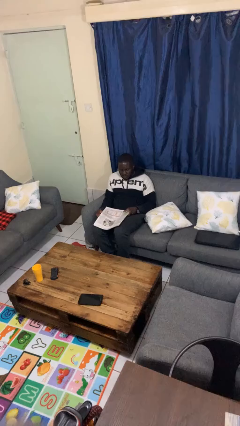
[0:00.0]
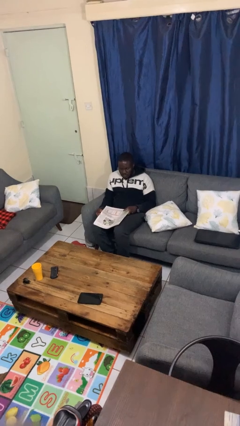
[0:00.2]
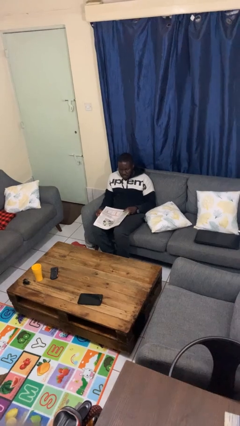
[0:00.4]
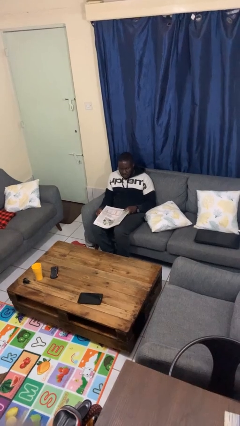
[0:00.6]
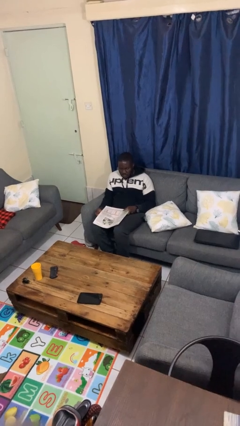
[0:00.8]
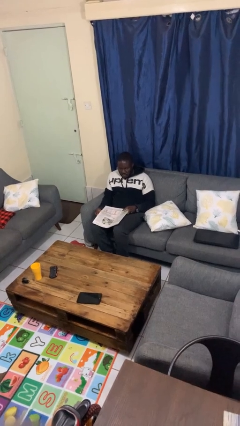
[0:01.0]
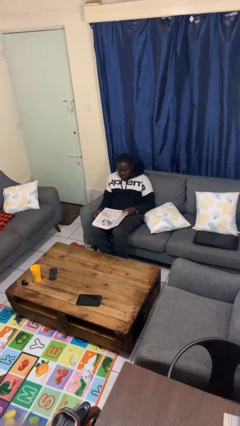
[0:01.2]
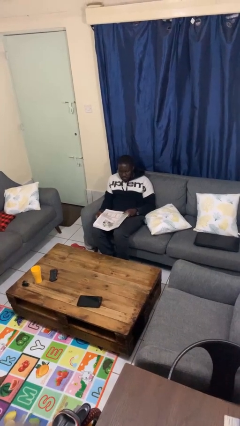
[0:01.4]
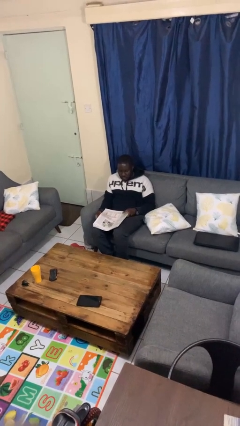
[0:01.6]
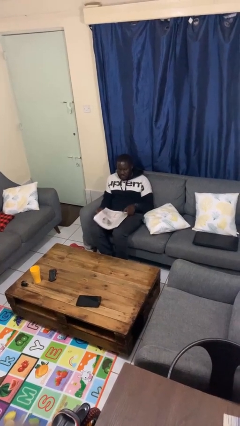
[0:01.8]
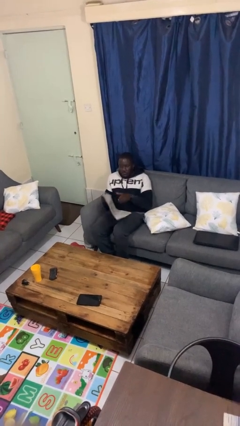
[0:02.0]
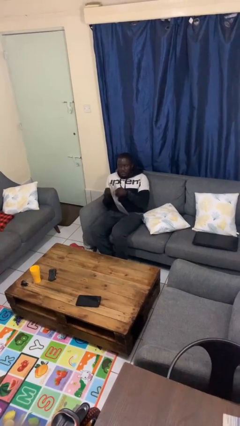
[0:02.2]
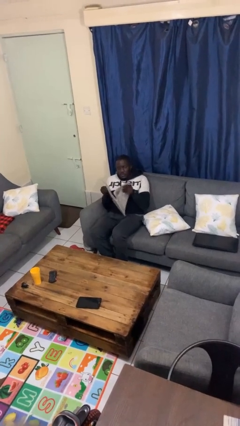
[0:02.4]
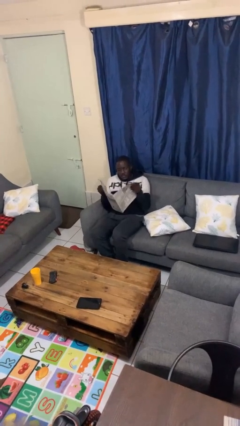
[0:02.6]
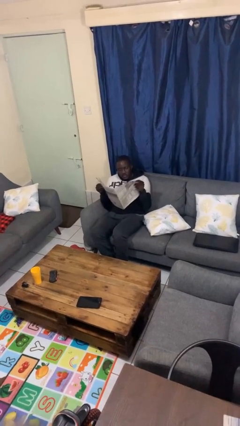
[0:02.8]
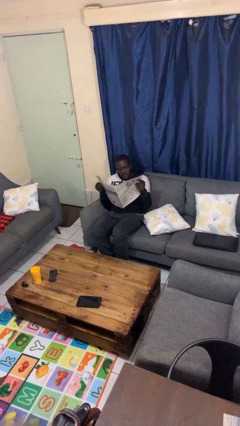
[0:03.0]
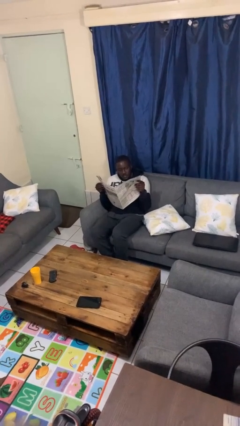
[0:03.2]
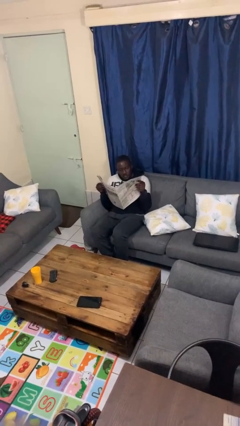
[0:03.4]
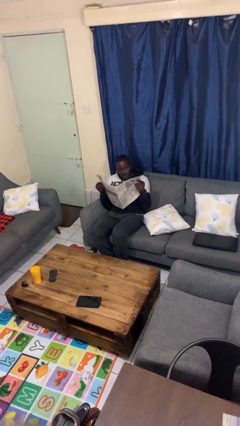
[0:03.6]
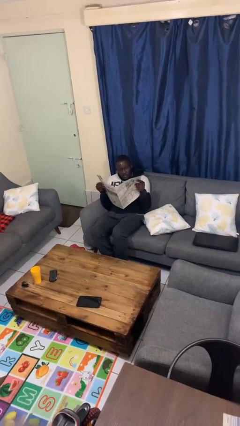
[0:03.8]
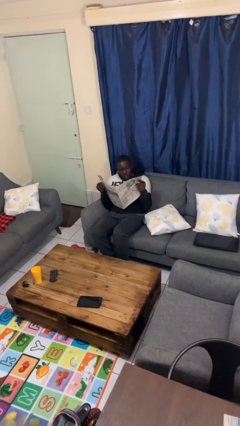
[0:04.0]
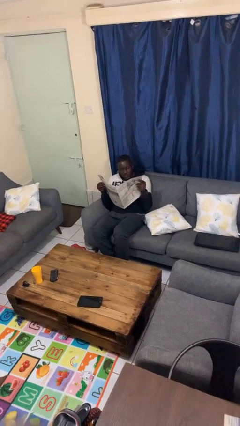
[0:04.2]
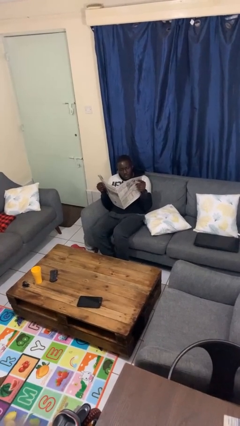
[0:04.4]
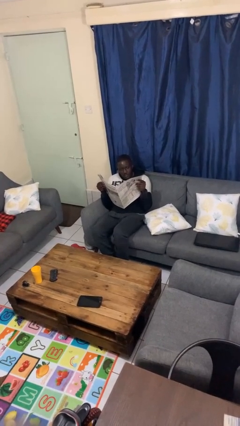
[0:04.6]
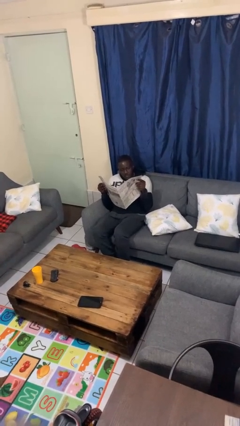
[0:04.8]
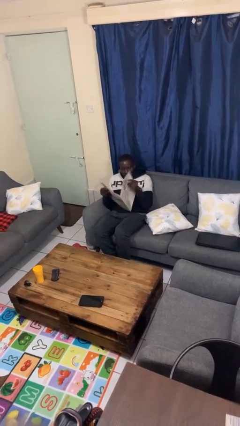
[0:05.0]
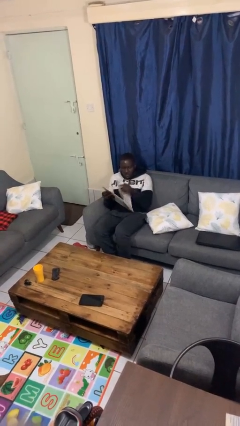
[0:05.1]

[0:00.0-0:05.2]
person reads newspaper

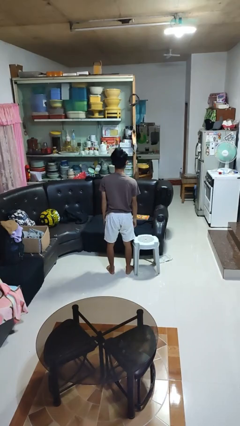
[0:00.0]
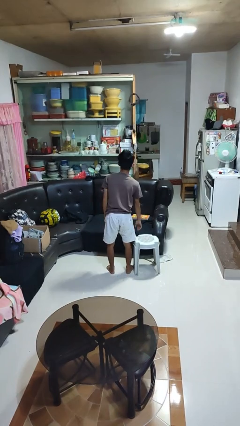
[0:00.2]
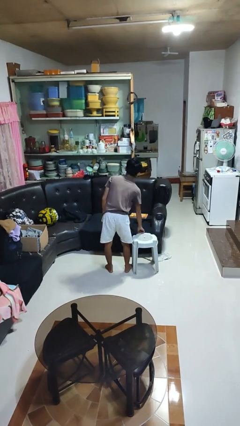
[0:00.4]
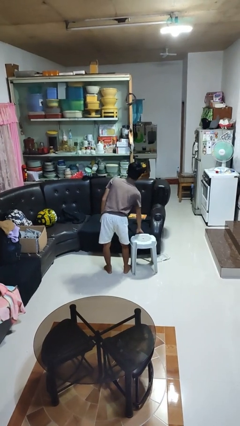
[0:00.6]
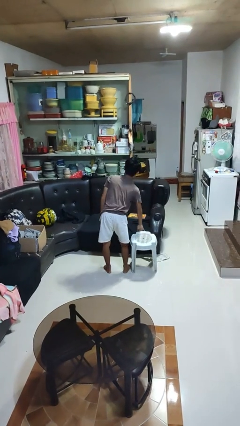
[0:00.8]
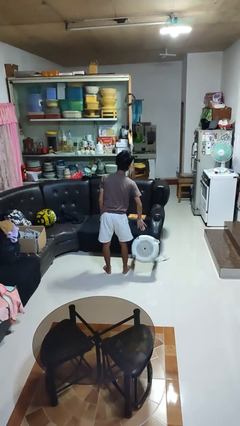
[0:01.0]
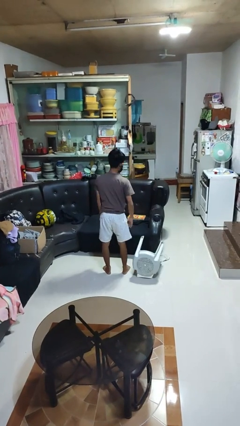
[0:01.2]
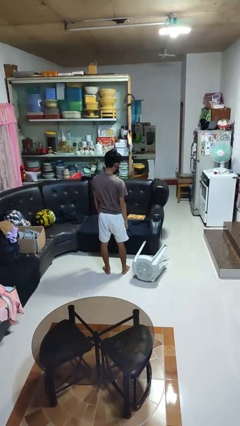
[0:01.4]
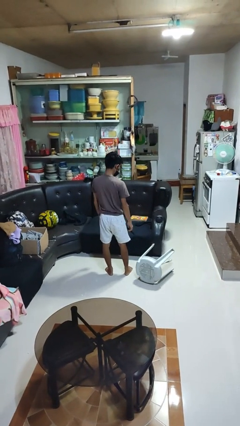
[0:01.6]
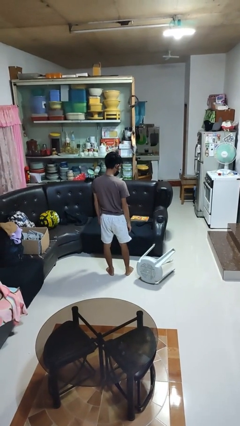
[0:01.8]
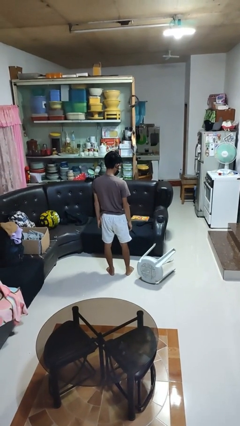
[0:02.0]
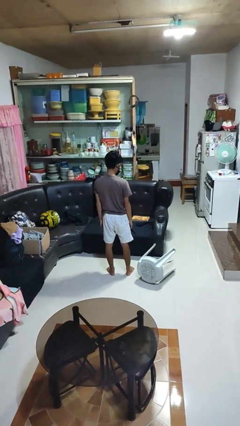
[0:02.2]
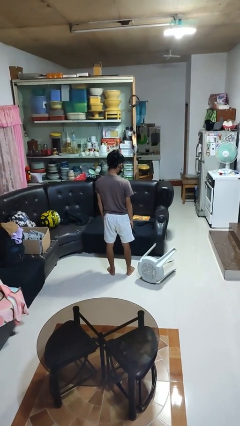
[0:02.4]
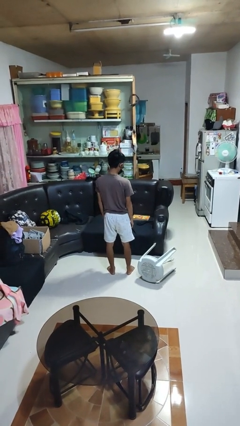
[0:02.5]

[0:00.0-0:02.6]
person knocks over furniture

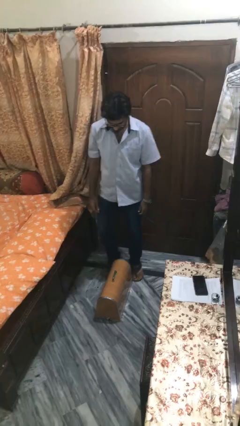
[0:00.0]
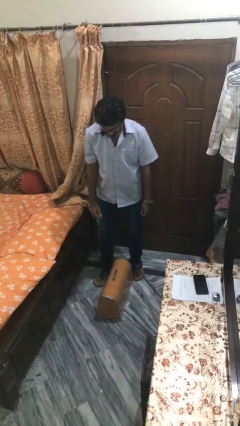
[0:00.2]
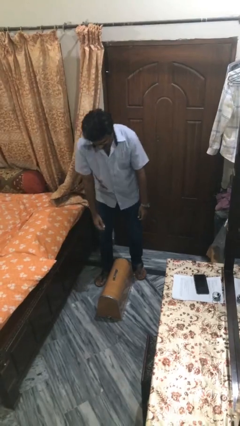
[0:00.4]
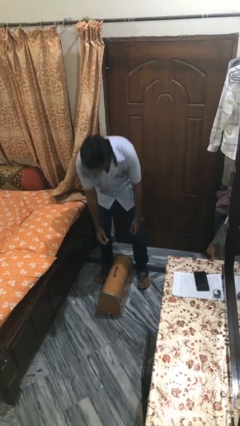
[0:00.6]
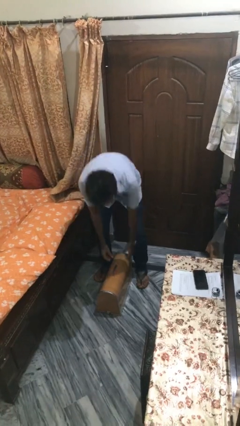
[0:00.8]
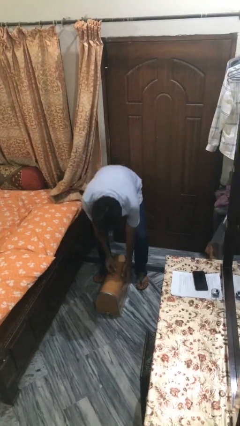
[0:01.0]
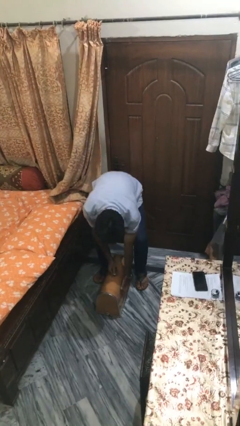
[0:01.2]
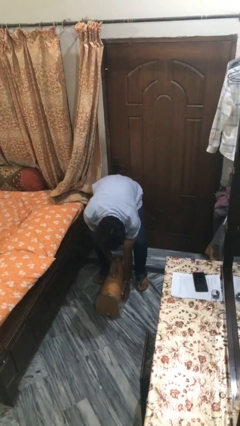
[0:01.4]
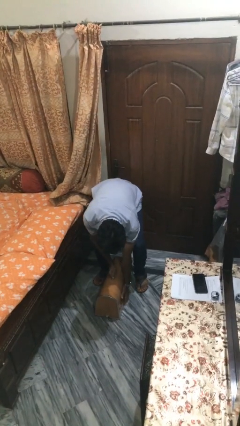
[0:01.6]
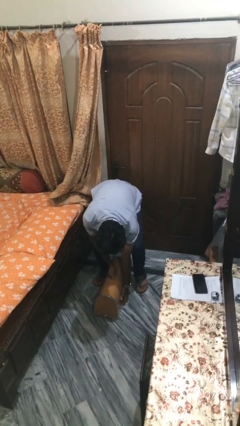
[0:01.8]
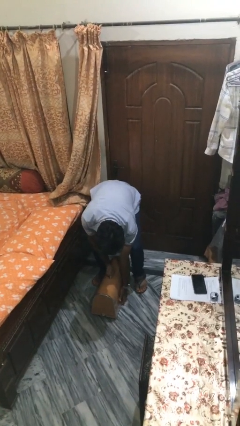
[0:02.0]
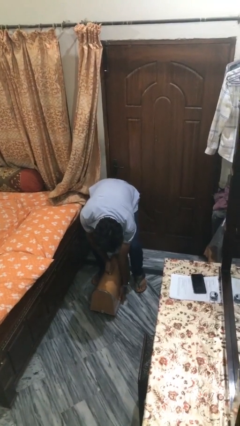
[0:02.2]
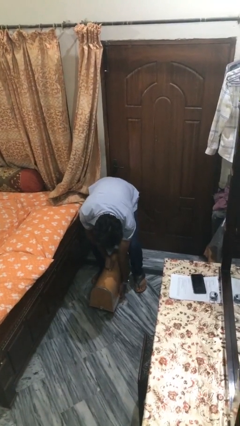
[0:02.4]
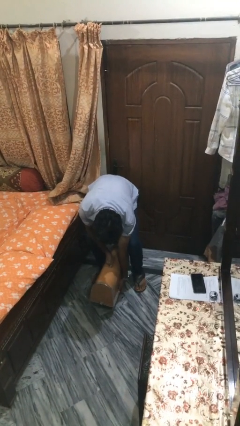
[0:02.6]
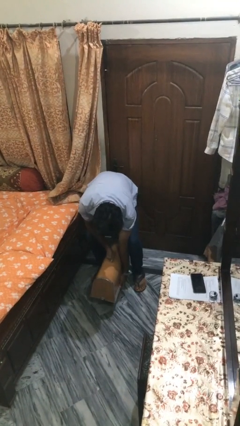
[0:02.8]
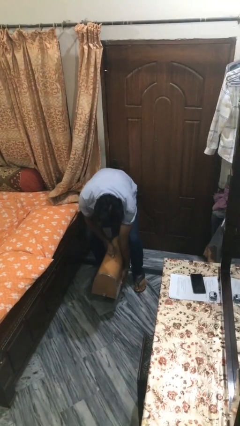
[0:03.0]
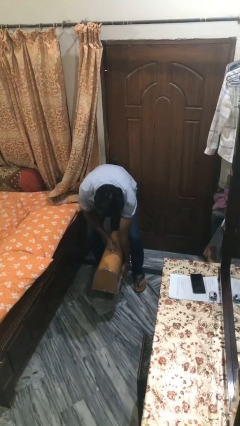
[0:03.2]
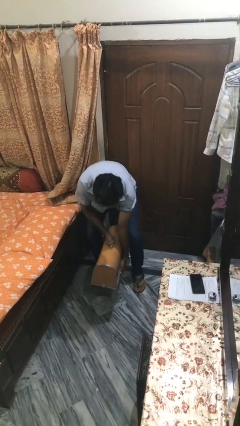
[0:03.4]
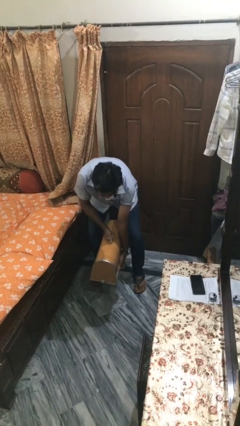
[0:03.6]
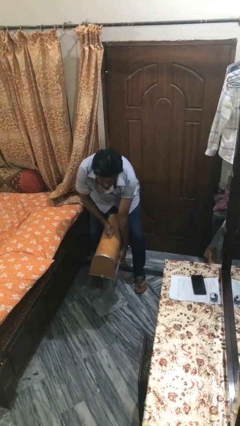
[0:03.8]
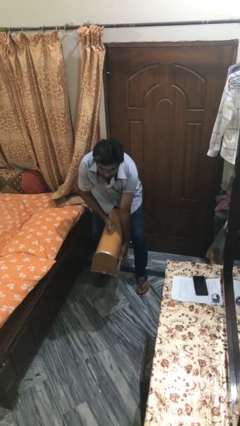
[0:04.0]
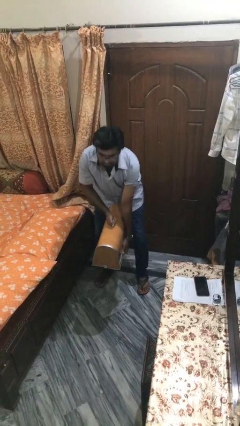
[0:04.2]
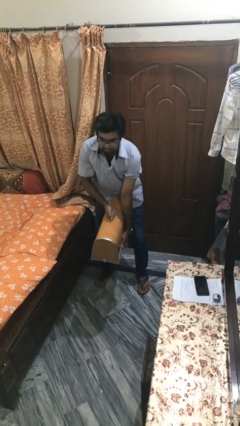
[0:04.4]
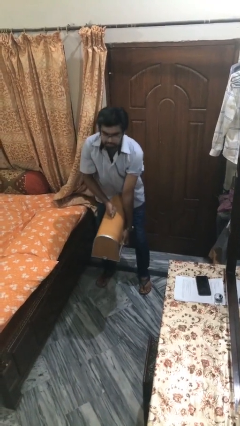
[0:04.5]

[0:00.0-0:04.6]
person picks up object from floor

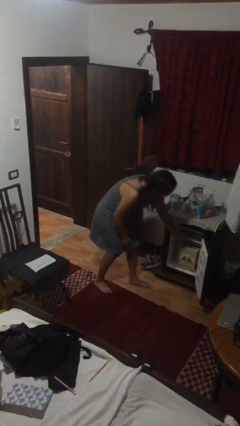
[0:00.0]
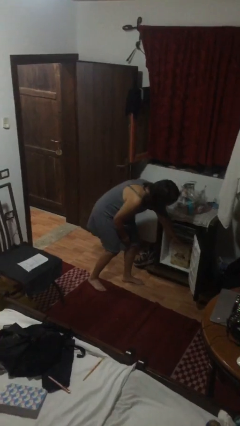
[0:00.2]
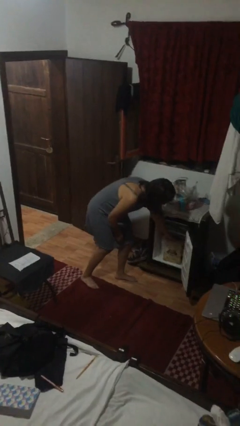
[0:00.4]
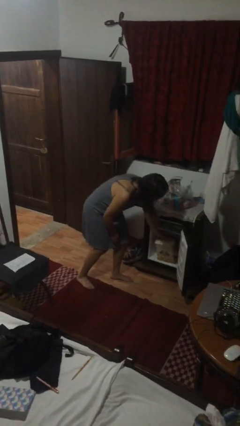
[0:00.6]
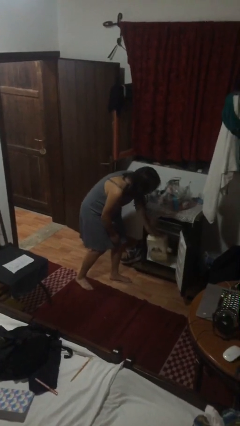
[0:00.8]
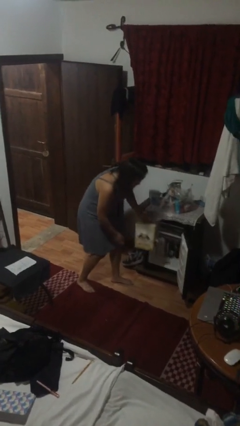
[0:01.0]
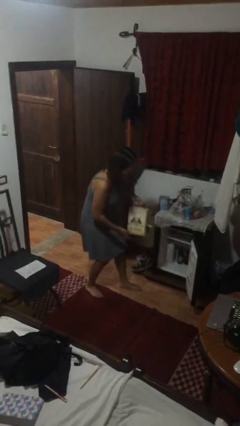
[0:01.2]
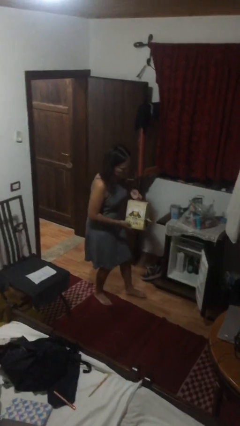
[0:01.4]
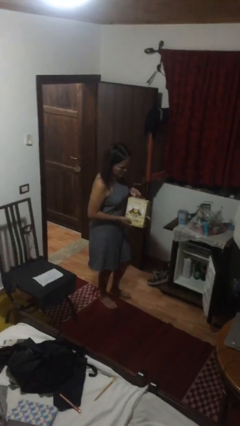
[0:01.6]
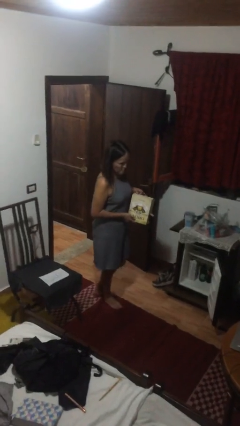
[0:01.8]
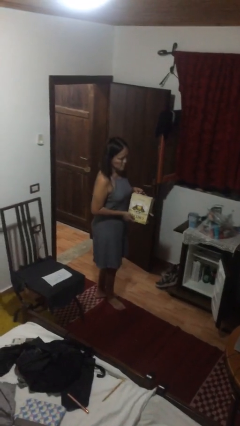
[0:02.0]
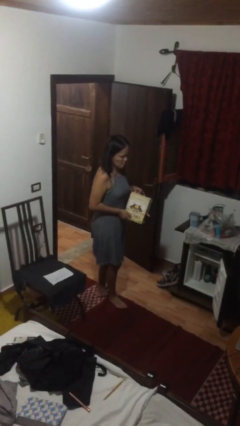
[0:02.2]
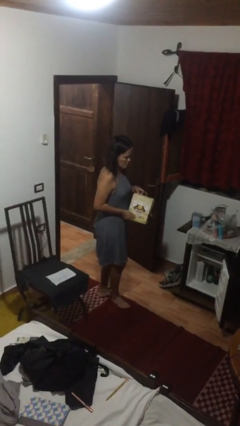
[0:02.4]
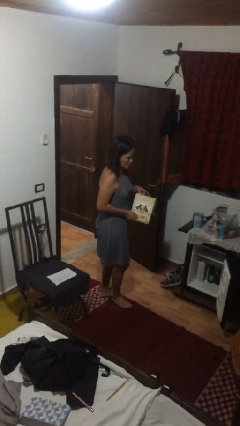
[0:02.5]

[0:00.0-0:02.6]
person picks up object from cabinet

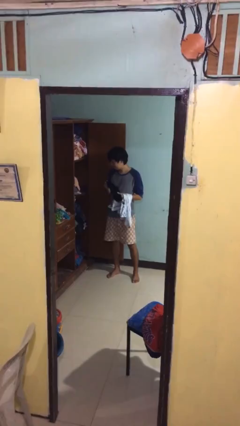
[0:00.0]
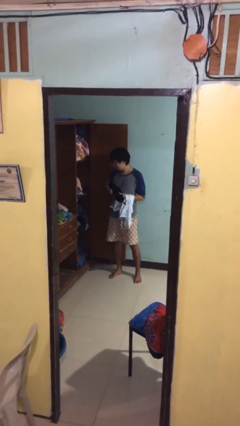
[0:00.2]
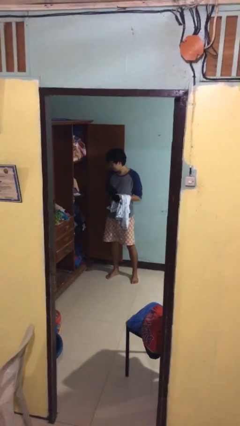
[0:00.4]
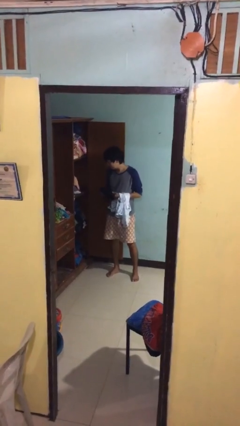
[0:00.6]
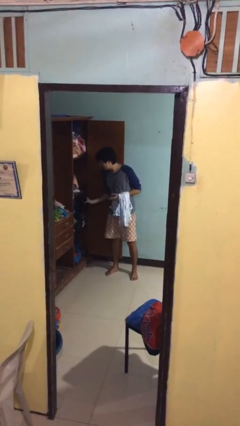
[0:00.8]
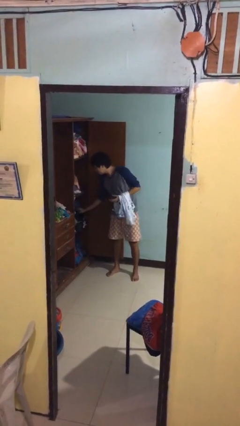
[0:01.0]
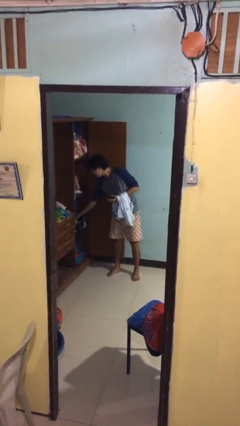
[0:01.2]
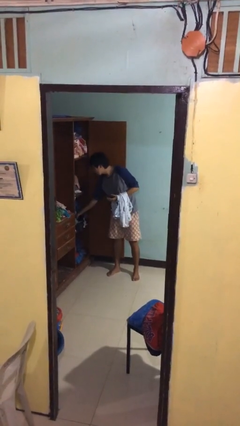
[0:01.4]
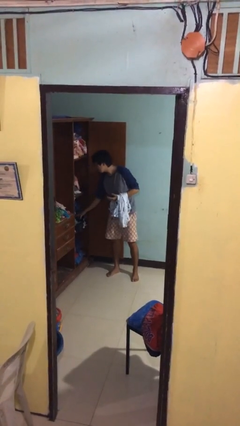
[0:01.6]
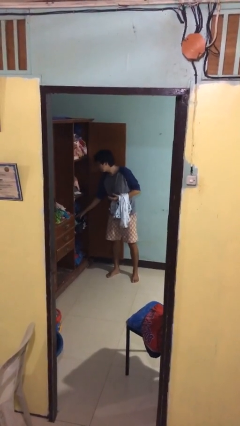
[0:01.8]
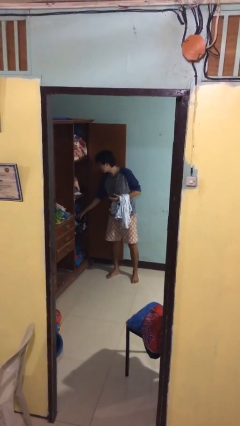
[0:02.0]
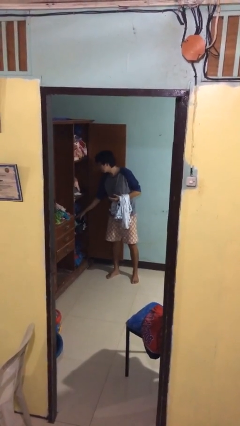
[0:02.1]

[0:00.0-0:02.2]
person puts clothes into dresser

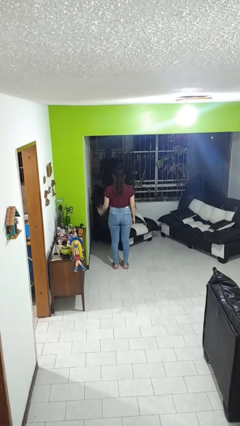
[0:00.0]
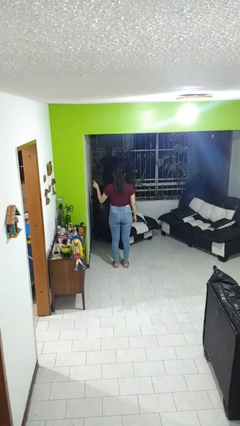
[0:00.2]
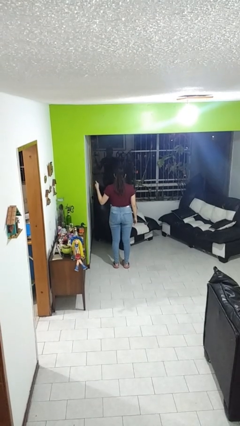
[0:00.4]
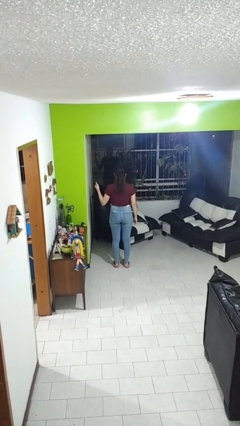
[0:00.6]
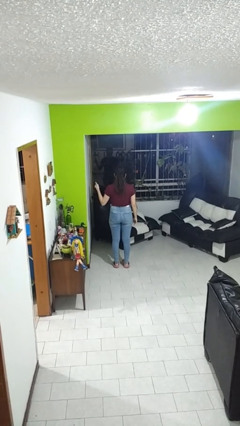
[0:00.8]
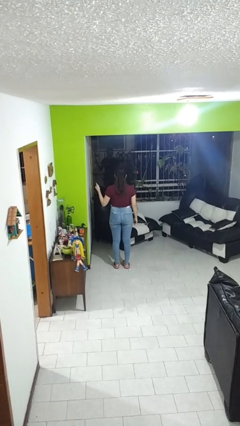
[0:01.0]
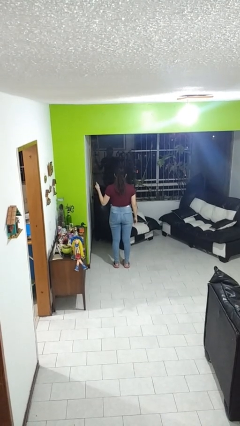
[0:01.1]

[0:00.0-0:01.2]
person gestures thumbs up
